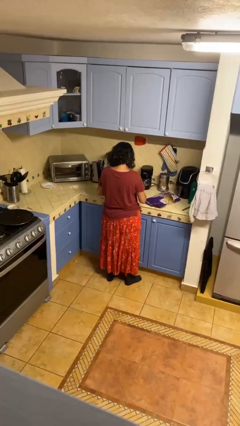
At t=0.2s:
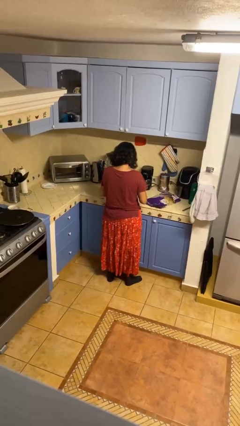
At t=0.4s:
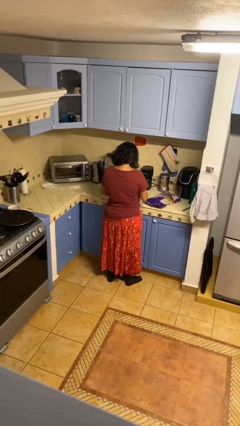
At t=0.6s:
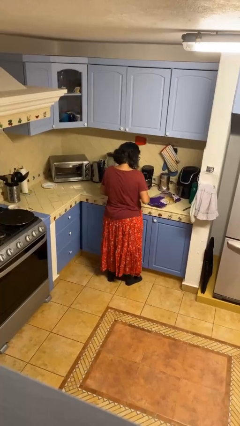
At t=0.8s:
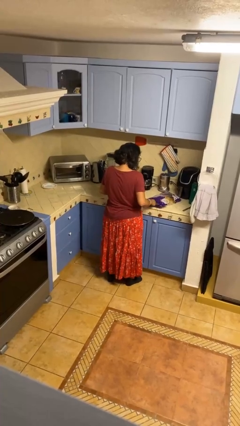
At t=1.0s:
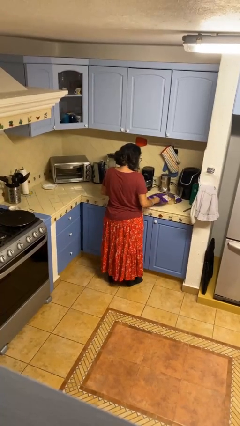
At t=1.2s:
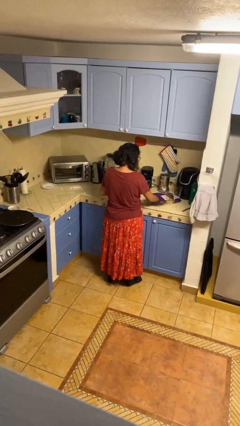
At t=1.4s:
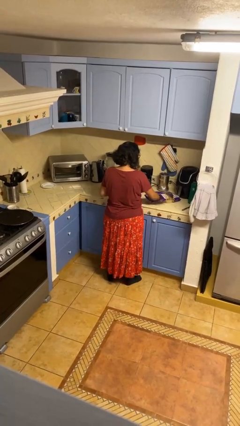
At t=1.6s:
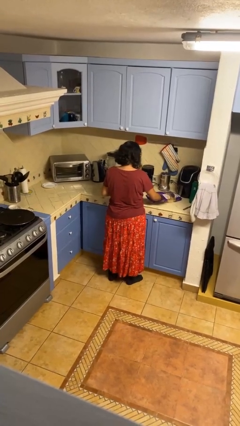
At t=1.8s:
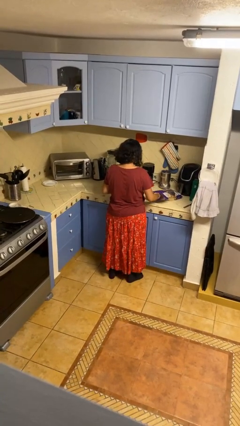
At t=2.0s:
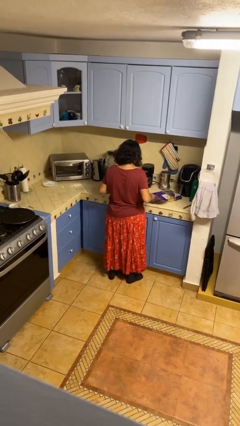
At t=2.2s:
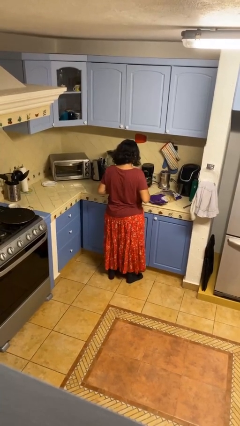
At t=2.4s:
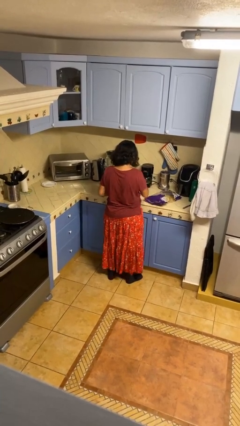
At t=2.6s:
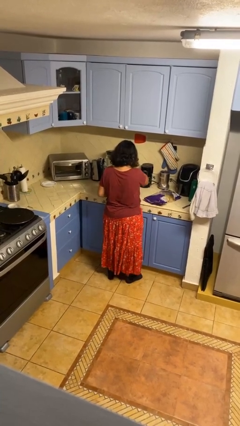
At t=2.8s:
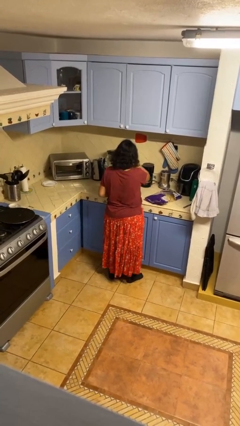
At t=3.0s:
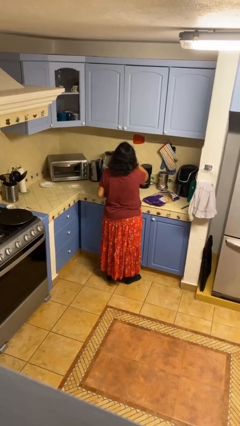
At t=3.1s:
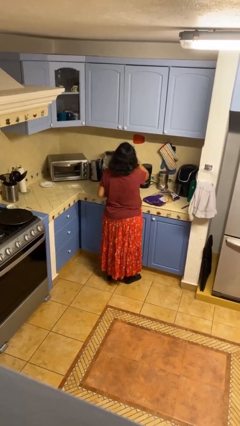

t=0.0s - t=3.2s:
person eats snack from bag

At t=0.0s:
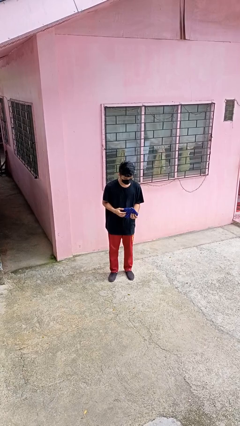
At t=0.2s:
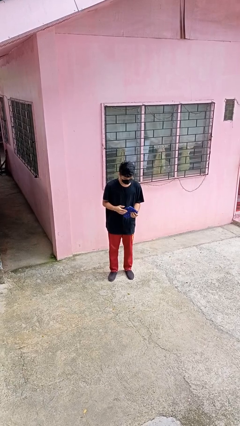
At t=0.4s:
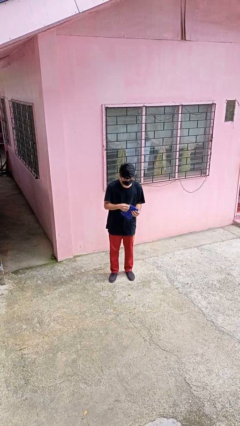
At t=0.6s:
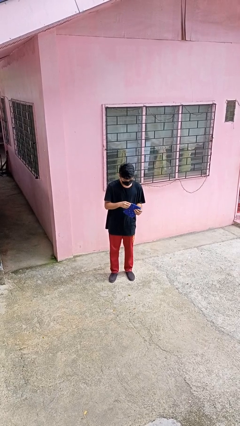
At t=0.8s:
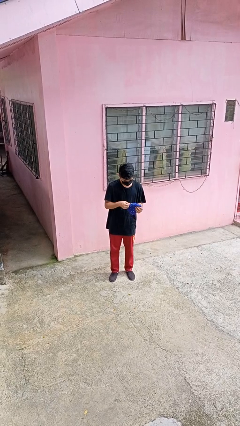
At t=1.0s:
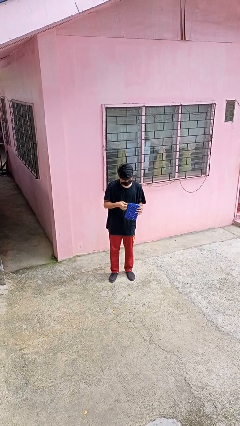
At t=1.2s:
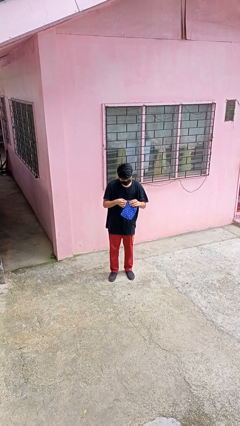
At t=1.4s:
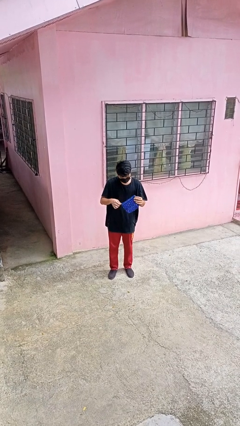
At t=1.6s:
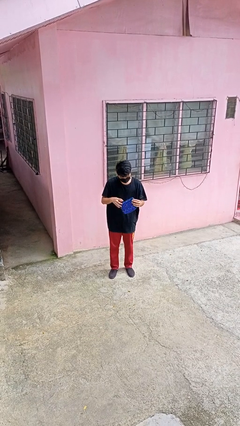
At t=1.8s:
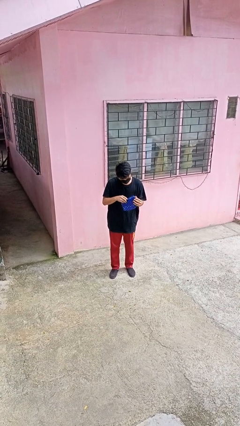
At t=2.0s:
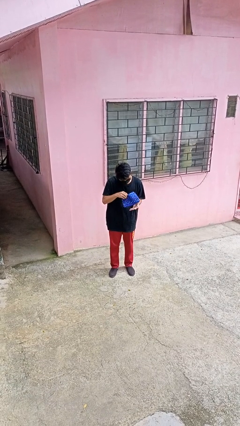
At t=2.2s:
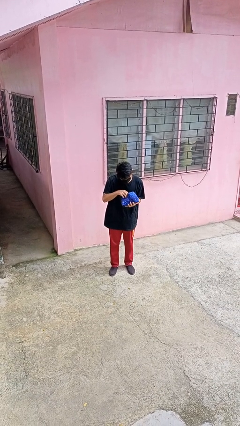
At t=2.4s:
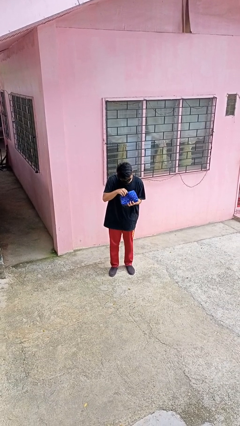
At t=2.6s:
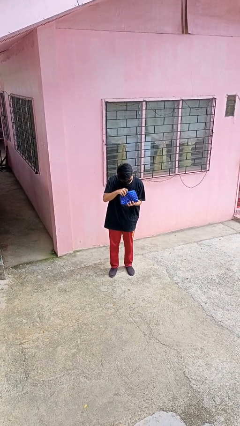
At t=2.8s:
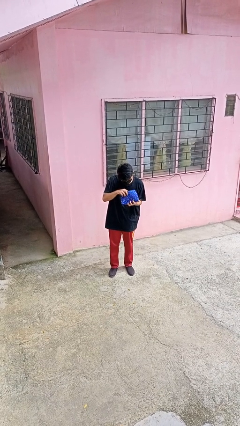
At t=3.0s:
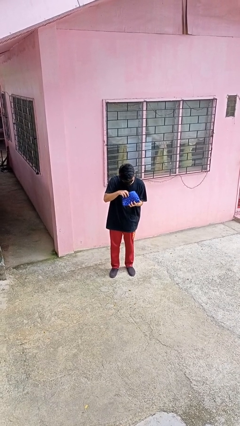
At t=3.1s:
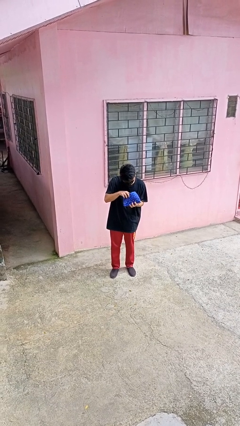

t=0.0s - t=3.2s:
person searches in purse

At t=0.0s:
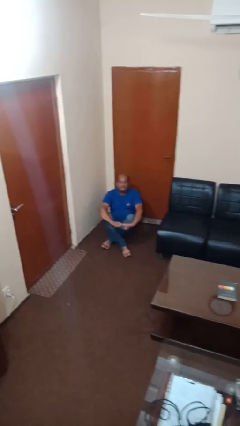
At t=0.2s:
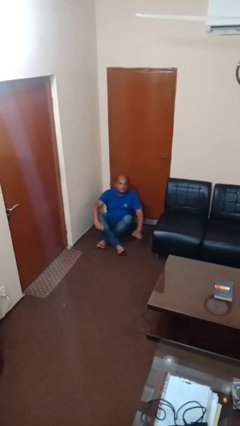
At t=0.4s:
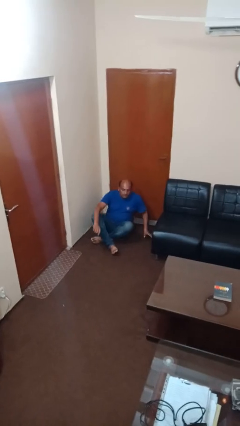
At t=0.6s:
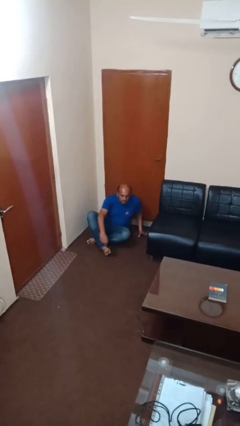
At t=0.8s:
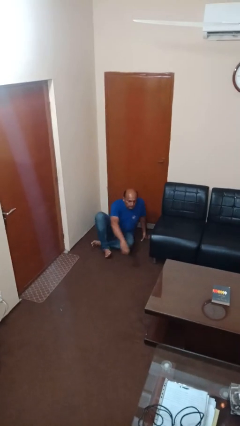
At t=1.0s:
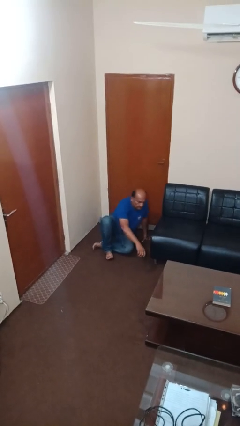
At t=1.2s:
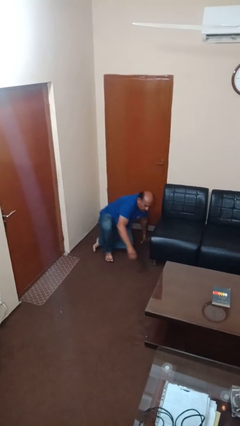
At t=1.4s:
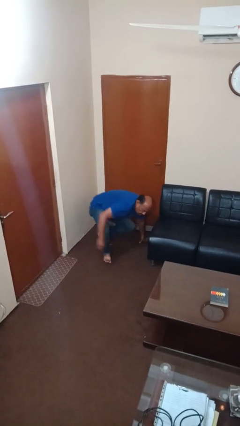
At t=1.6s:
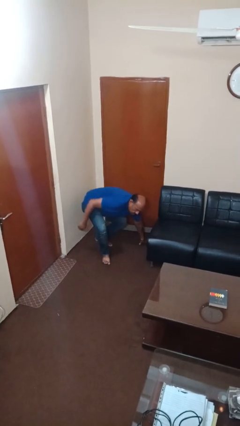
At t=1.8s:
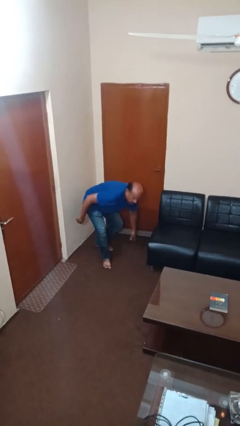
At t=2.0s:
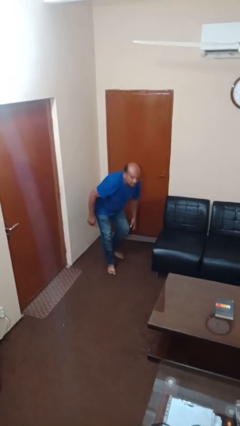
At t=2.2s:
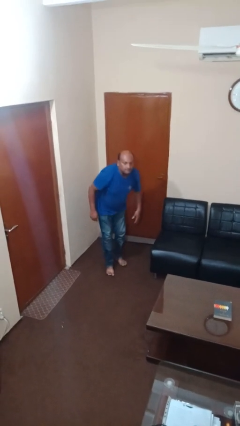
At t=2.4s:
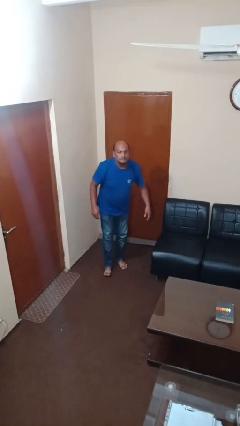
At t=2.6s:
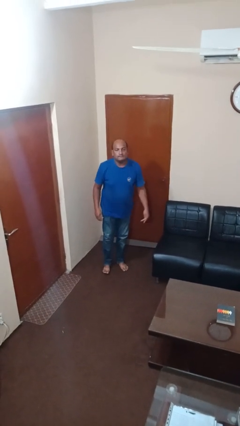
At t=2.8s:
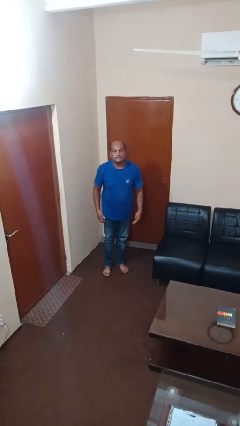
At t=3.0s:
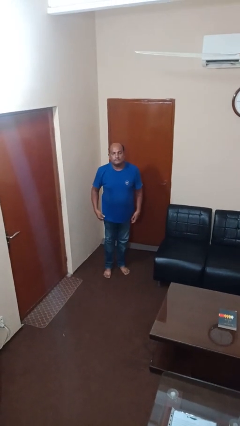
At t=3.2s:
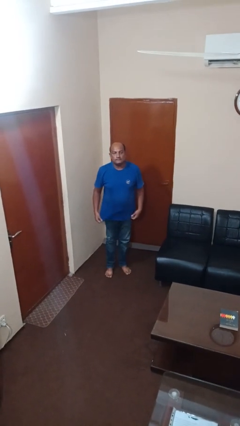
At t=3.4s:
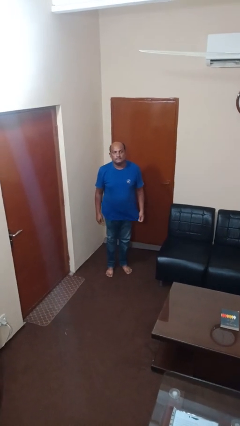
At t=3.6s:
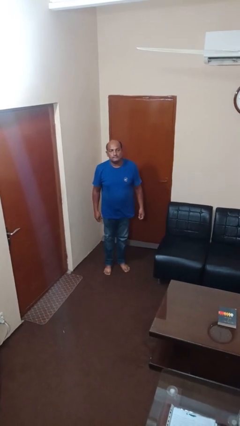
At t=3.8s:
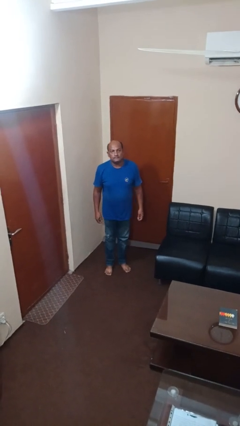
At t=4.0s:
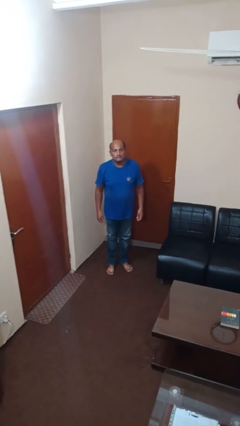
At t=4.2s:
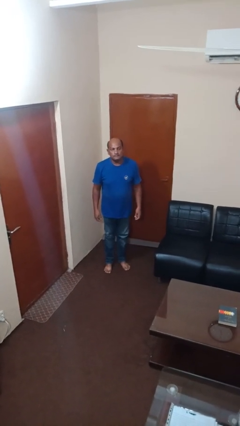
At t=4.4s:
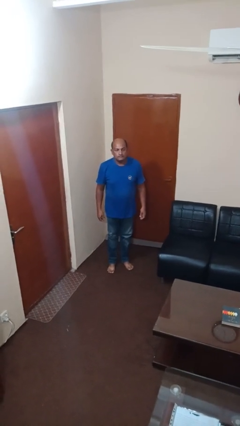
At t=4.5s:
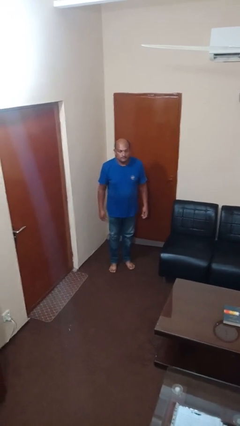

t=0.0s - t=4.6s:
person stands up from floor

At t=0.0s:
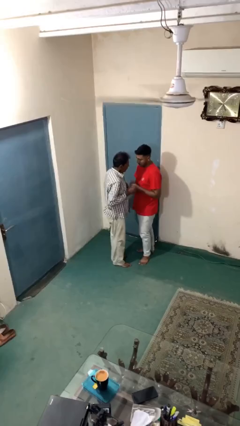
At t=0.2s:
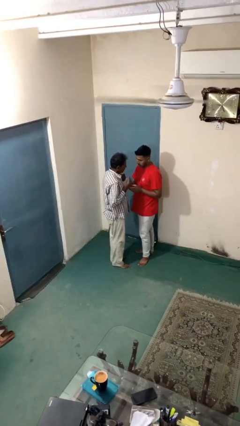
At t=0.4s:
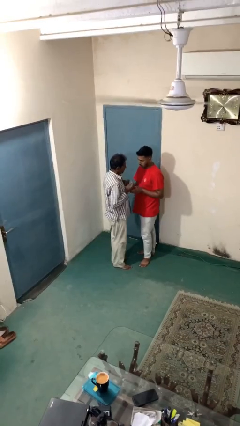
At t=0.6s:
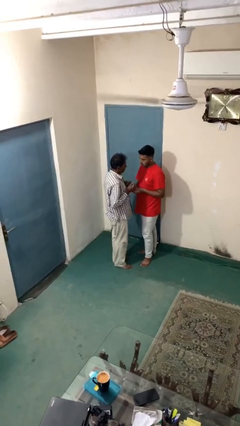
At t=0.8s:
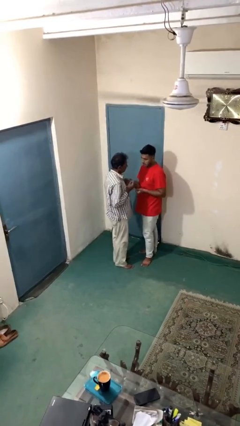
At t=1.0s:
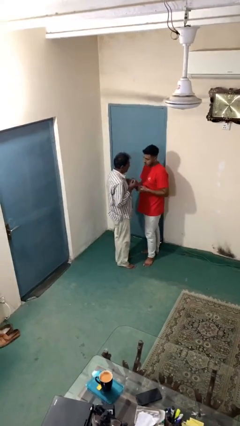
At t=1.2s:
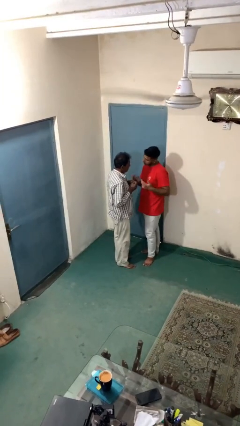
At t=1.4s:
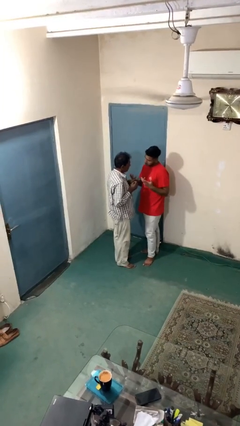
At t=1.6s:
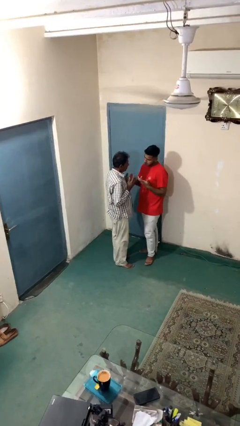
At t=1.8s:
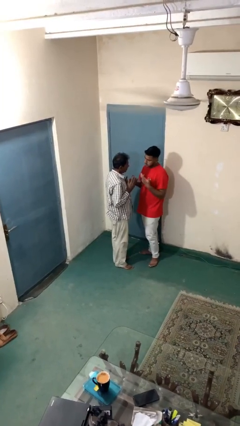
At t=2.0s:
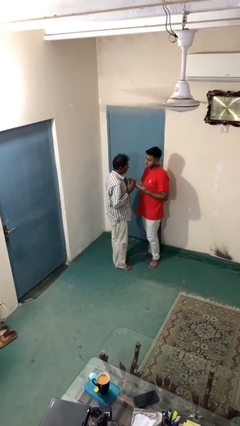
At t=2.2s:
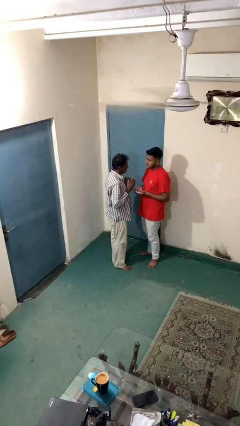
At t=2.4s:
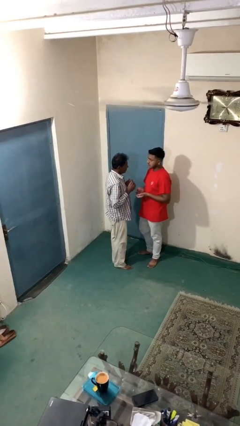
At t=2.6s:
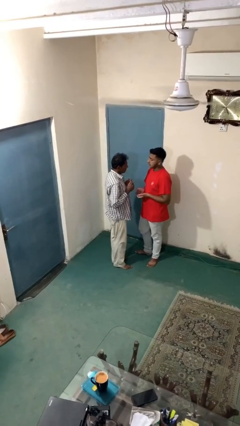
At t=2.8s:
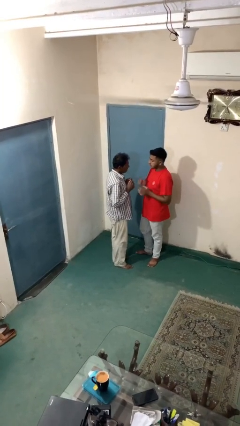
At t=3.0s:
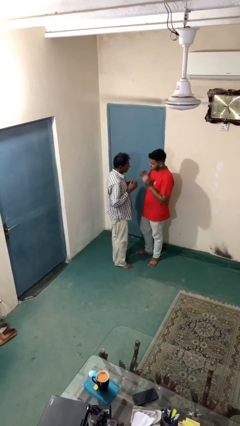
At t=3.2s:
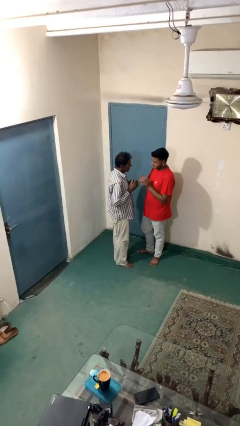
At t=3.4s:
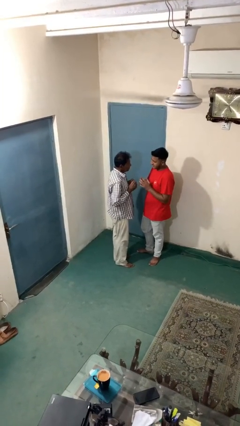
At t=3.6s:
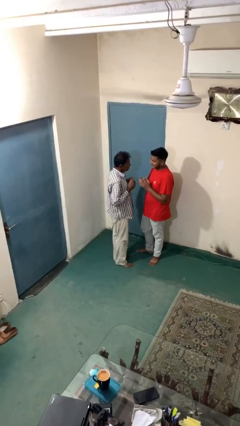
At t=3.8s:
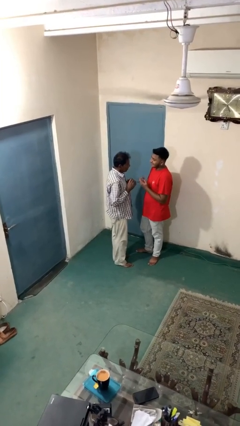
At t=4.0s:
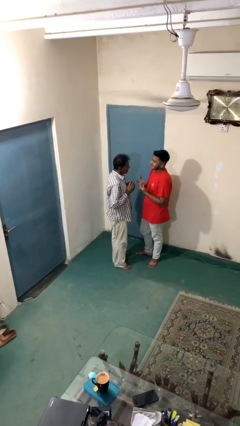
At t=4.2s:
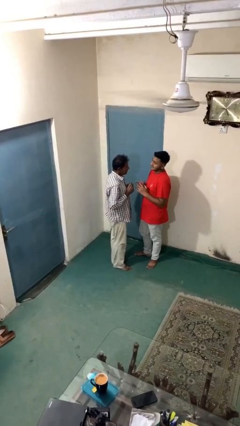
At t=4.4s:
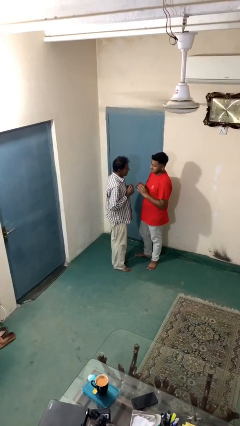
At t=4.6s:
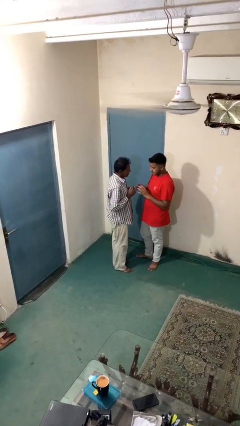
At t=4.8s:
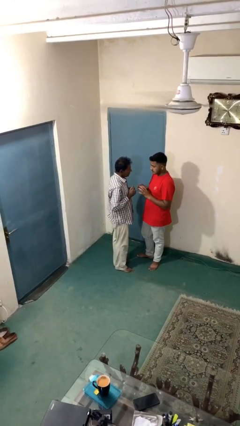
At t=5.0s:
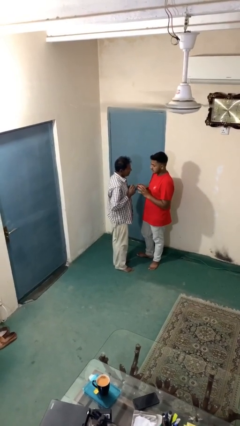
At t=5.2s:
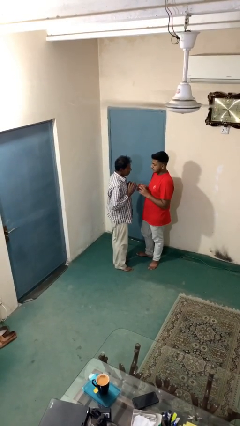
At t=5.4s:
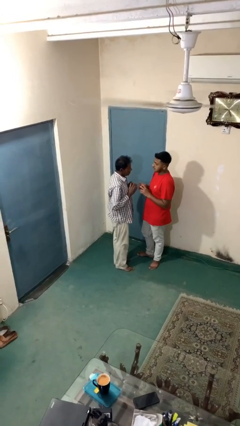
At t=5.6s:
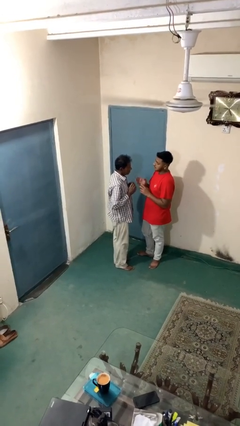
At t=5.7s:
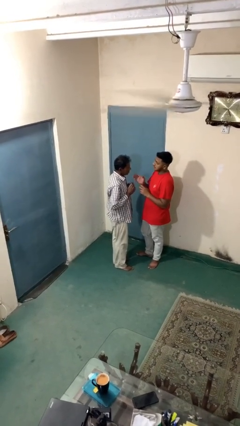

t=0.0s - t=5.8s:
person talks to person

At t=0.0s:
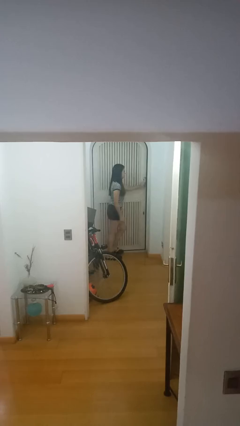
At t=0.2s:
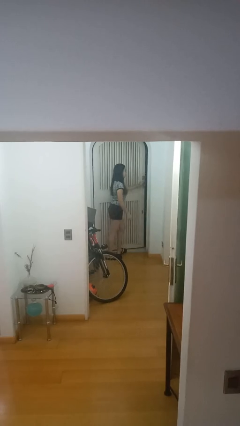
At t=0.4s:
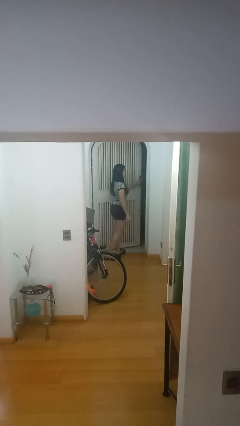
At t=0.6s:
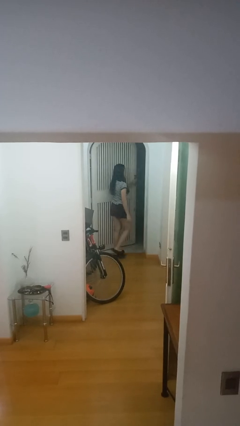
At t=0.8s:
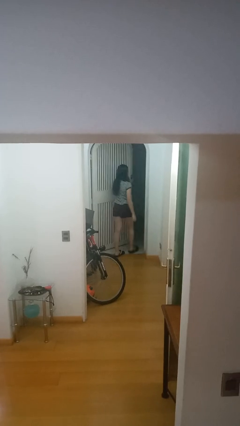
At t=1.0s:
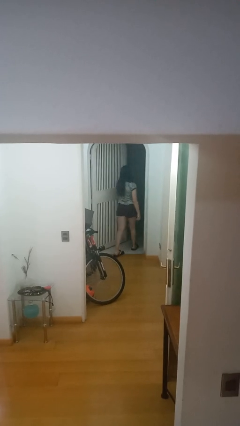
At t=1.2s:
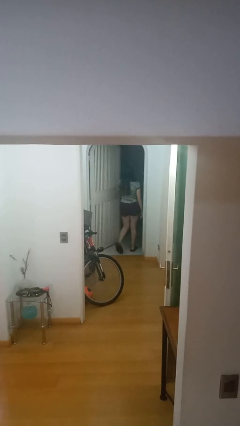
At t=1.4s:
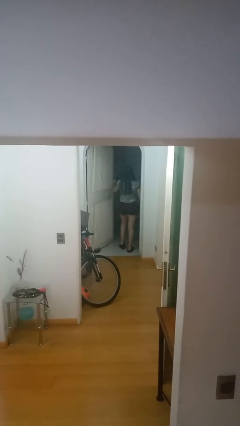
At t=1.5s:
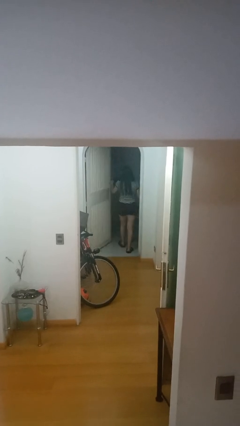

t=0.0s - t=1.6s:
person opens facility door
